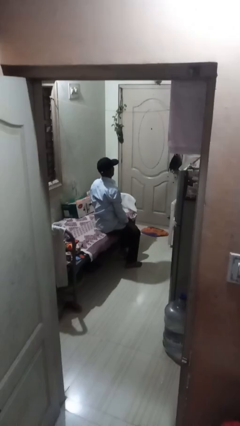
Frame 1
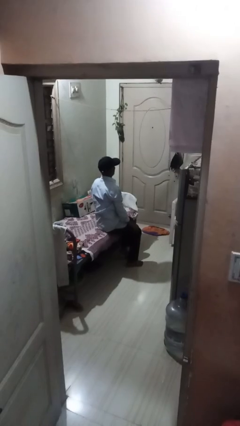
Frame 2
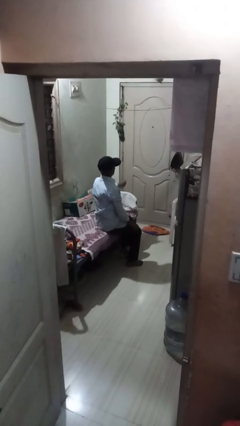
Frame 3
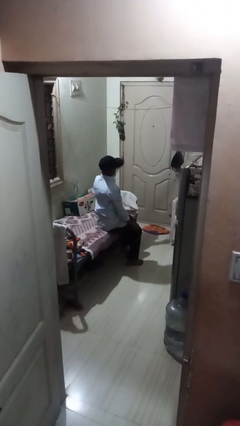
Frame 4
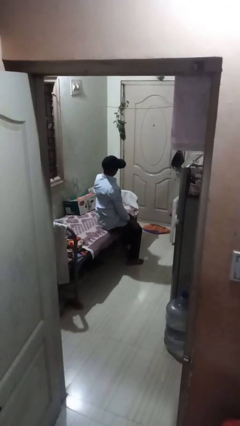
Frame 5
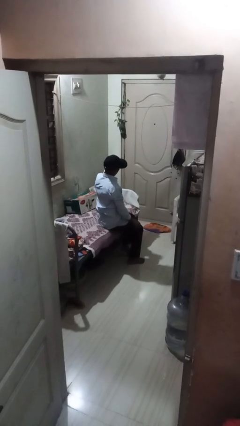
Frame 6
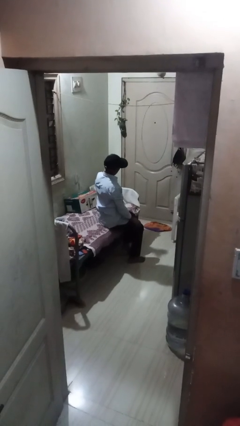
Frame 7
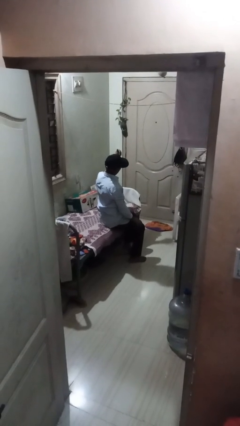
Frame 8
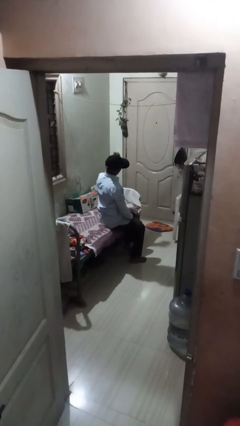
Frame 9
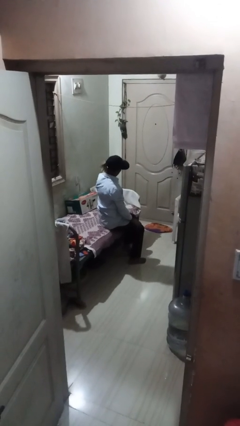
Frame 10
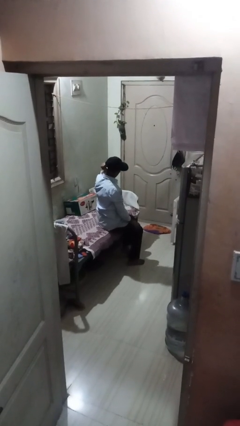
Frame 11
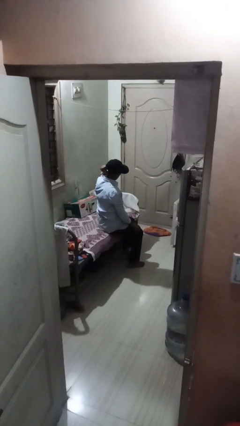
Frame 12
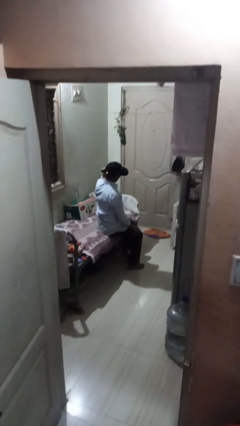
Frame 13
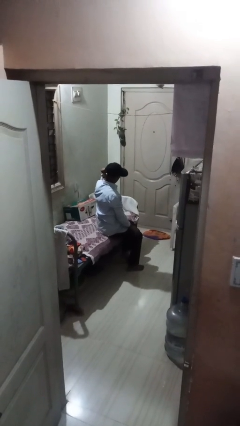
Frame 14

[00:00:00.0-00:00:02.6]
person gestures behind me

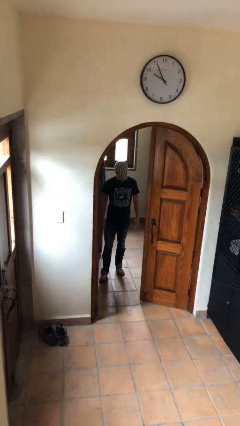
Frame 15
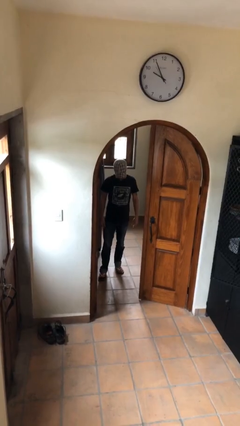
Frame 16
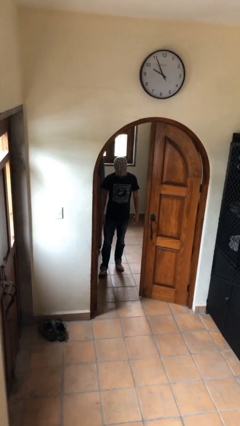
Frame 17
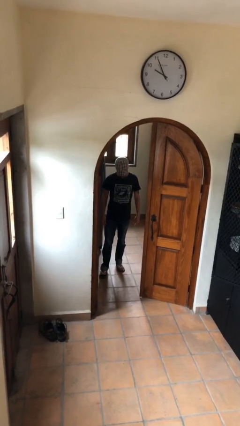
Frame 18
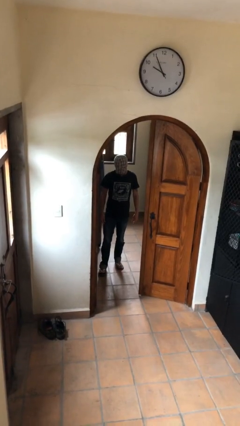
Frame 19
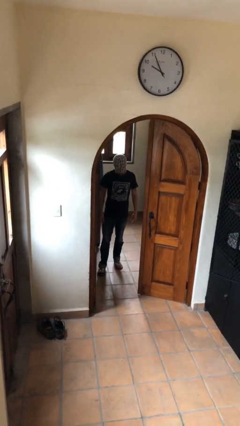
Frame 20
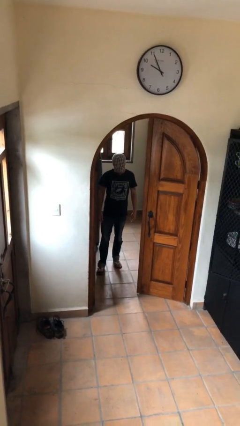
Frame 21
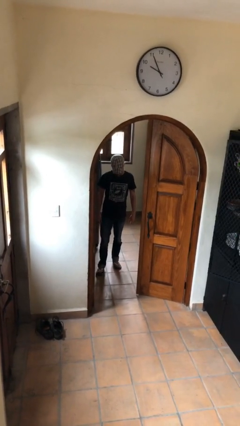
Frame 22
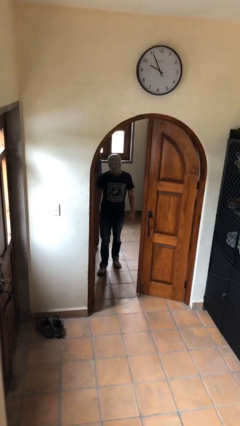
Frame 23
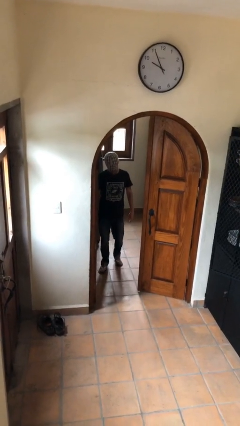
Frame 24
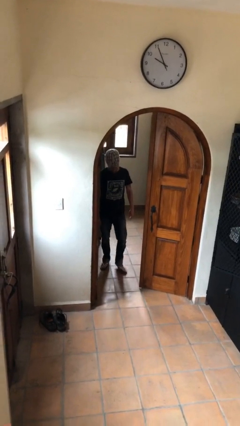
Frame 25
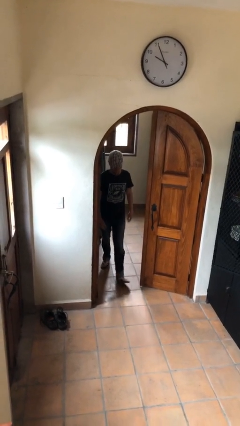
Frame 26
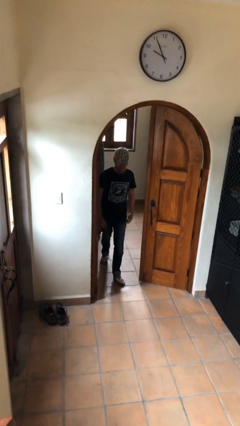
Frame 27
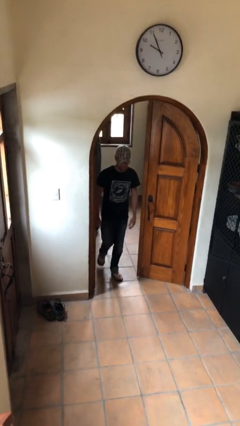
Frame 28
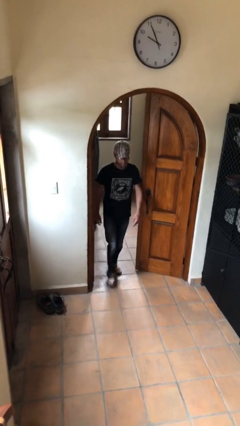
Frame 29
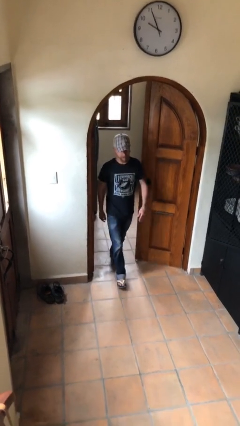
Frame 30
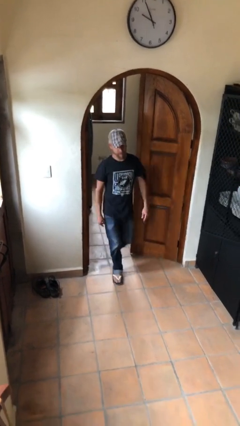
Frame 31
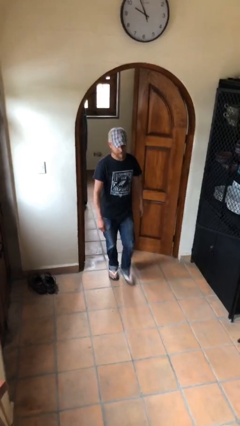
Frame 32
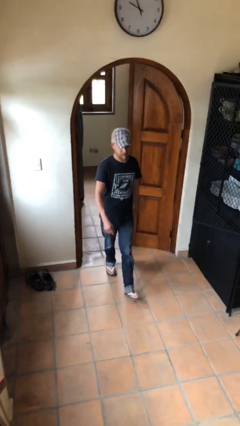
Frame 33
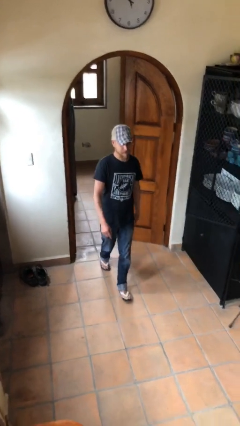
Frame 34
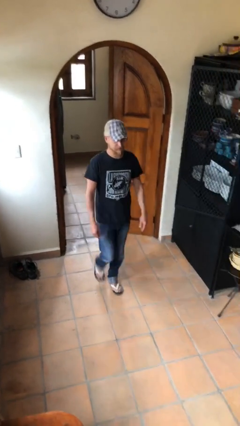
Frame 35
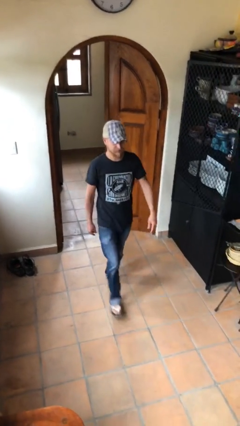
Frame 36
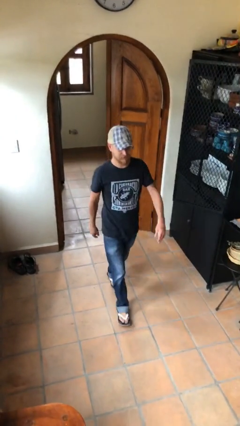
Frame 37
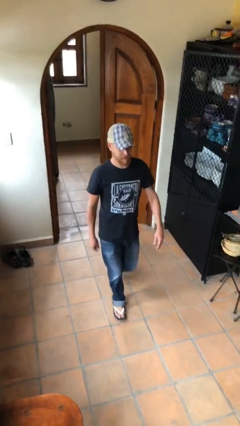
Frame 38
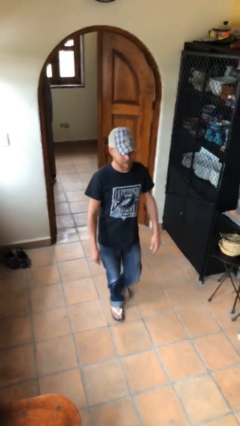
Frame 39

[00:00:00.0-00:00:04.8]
person enters scene through structure

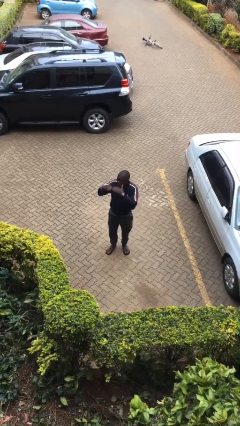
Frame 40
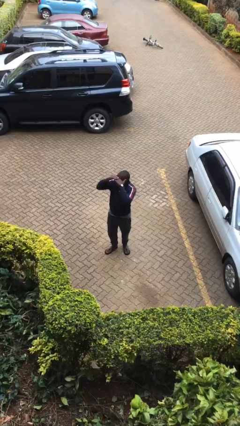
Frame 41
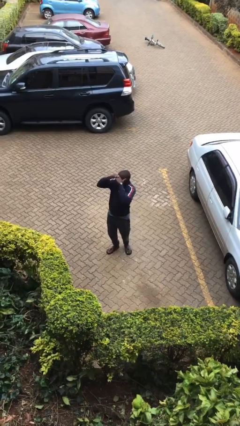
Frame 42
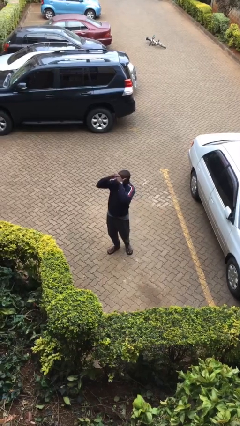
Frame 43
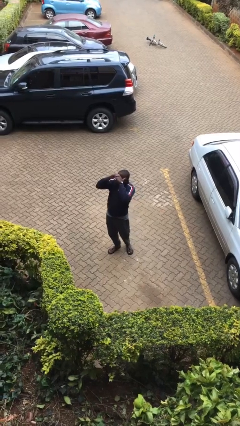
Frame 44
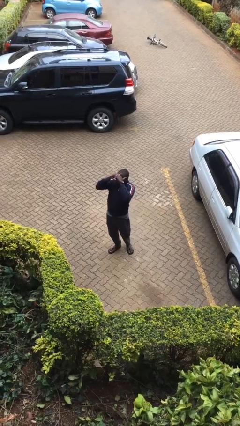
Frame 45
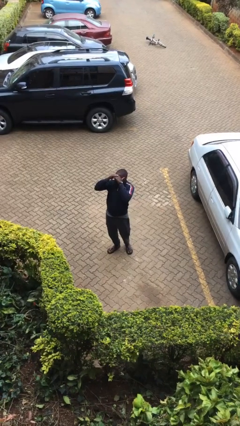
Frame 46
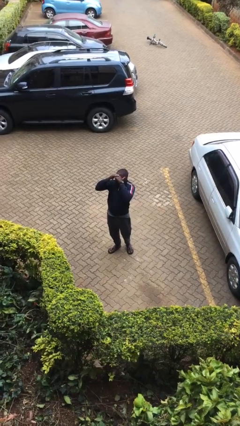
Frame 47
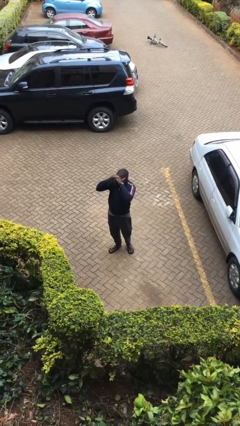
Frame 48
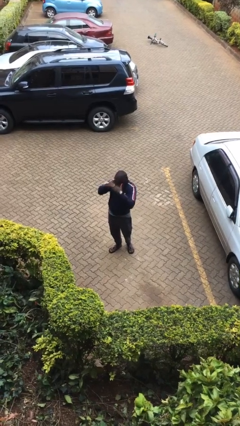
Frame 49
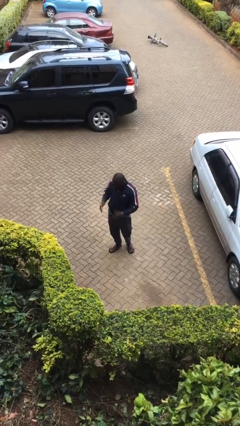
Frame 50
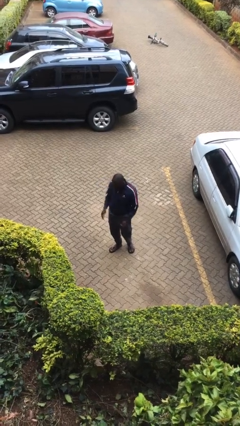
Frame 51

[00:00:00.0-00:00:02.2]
person shades eyes

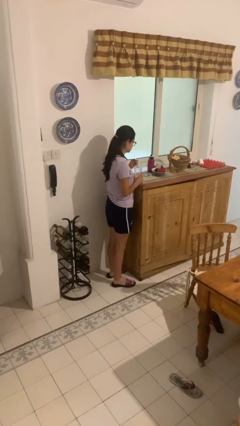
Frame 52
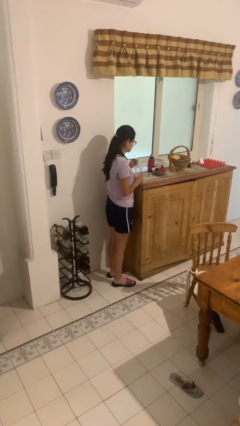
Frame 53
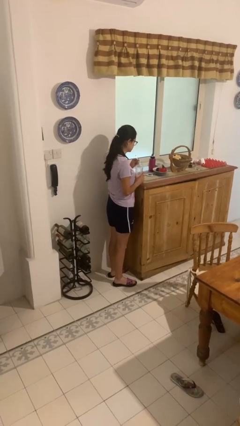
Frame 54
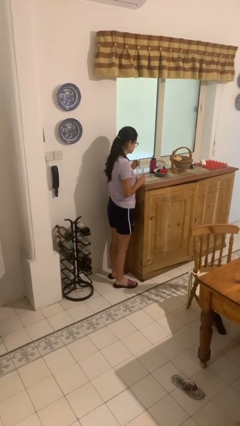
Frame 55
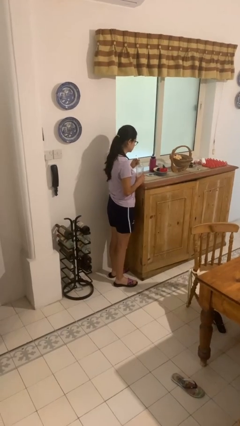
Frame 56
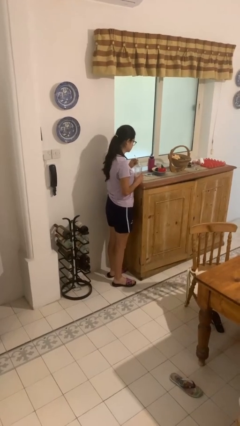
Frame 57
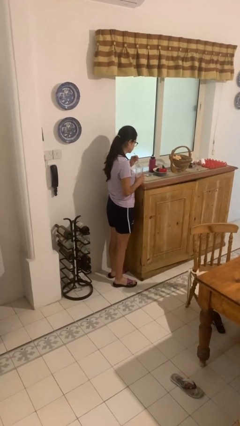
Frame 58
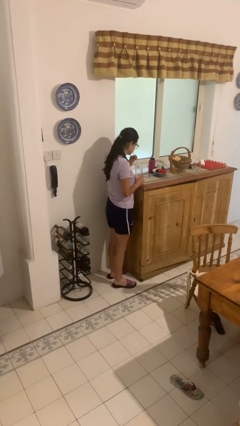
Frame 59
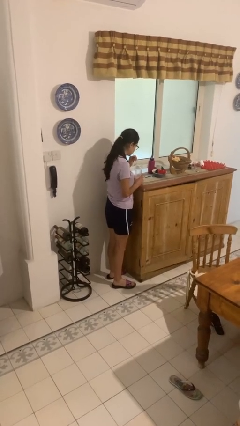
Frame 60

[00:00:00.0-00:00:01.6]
person drinks from straw

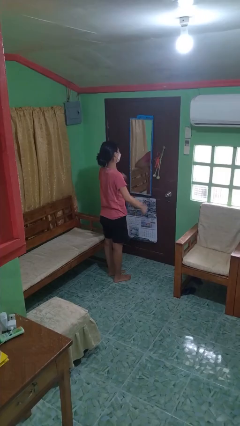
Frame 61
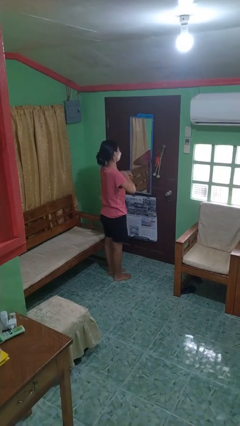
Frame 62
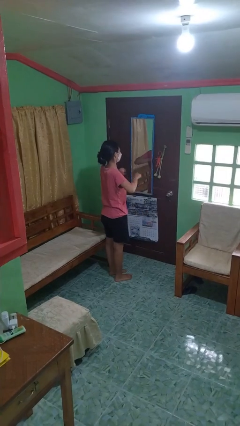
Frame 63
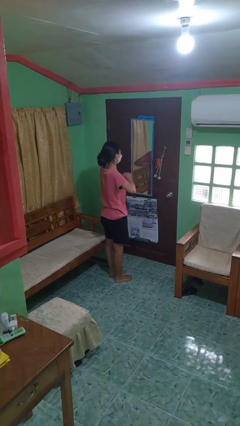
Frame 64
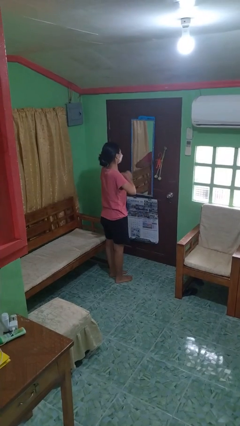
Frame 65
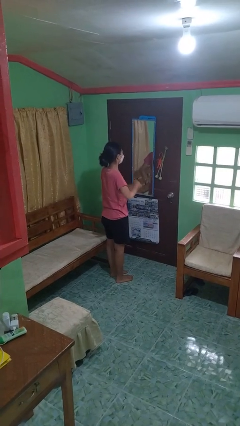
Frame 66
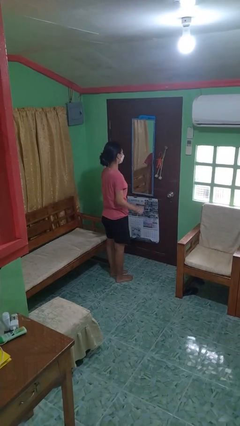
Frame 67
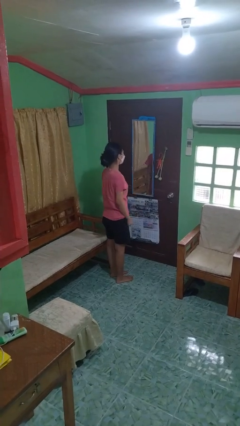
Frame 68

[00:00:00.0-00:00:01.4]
person drums on chest

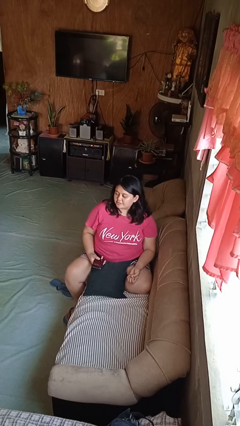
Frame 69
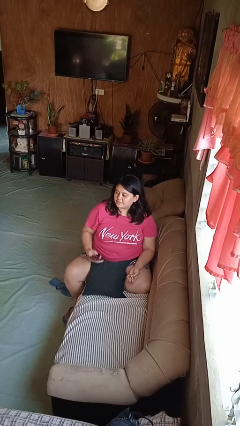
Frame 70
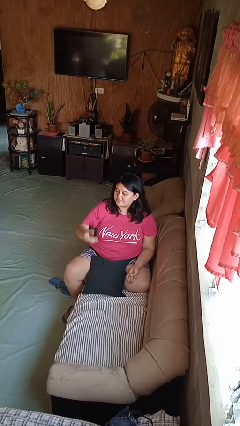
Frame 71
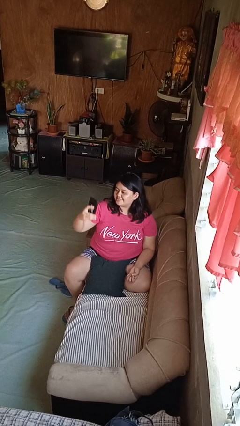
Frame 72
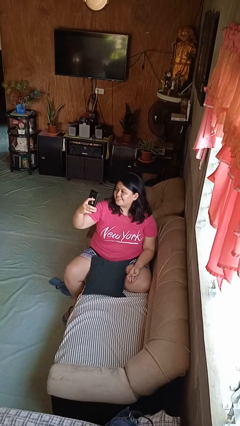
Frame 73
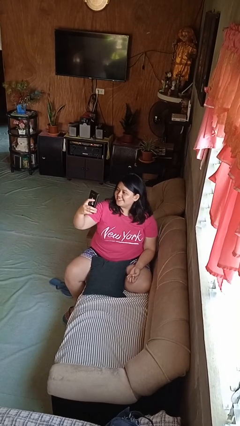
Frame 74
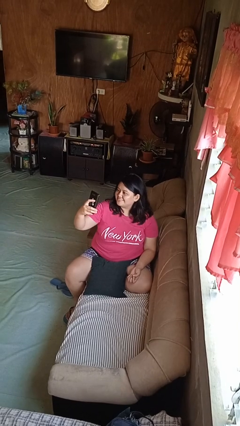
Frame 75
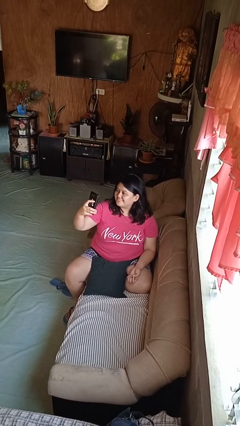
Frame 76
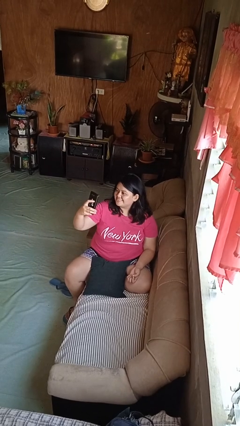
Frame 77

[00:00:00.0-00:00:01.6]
person takes selfie

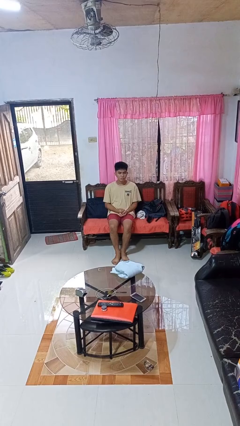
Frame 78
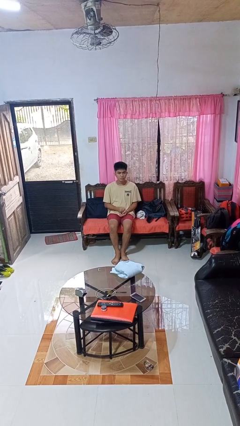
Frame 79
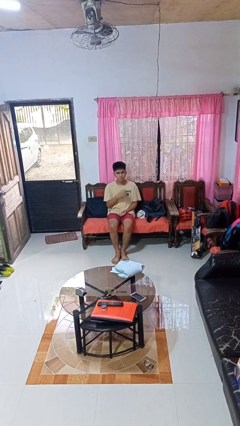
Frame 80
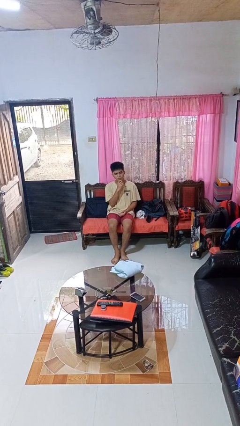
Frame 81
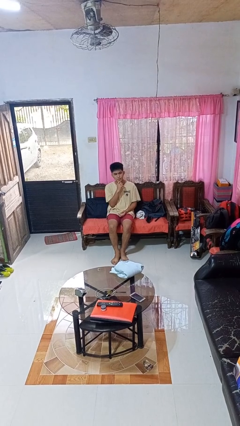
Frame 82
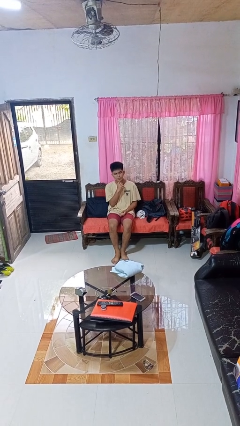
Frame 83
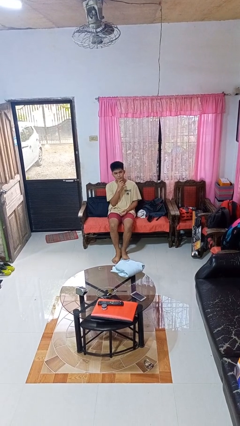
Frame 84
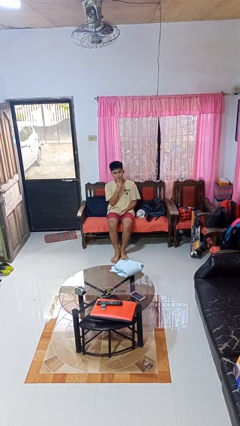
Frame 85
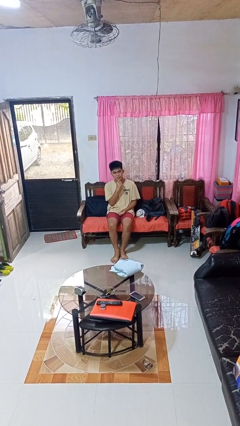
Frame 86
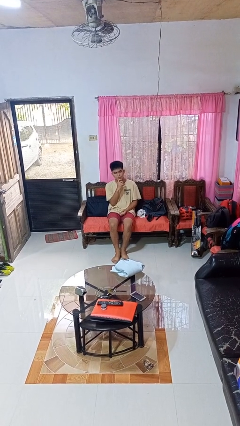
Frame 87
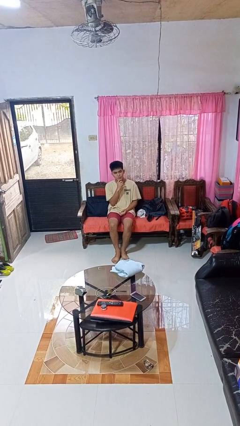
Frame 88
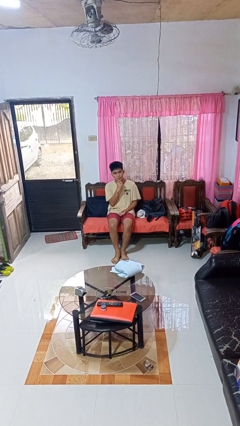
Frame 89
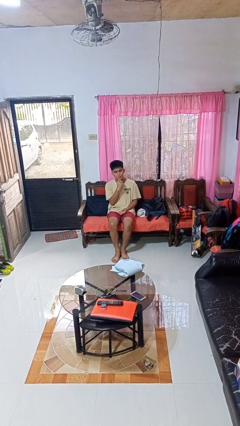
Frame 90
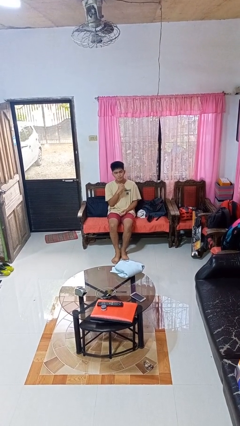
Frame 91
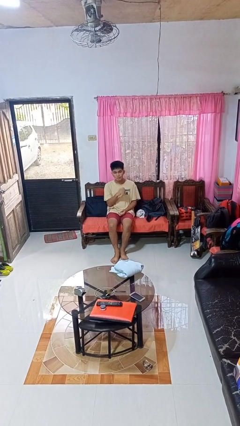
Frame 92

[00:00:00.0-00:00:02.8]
person strokes chin

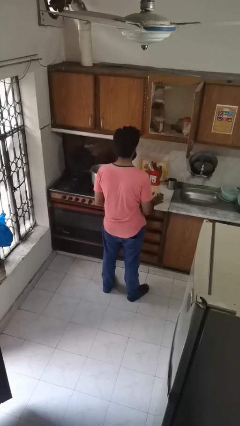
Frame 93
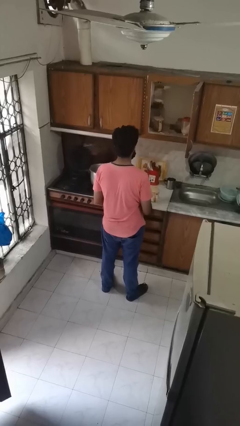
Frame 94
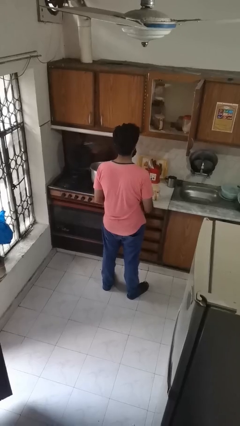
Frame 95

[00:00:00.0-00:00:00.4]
person puts down object into cabinet
